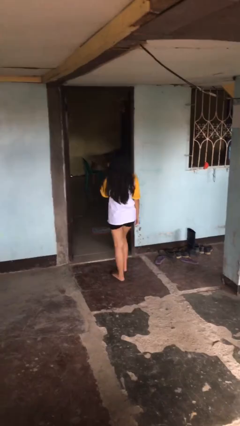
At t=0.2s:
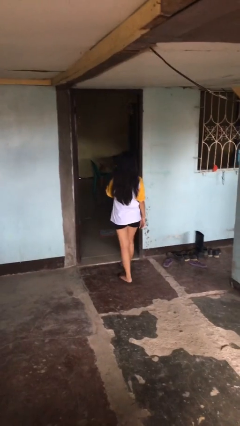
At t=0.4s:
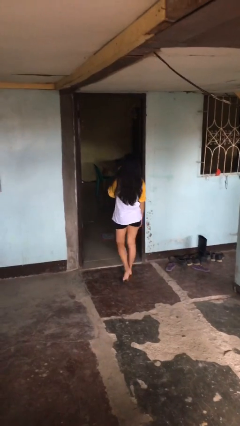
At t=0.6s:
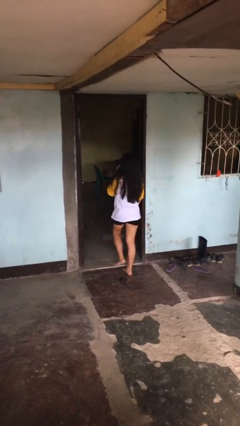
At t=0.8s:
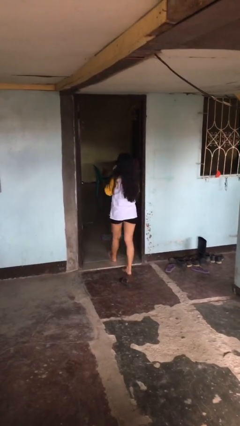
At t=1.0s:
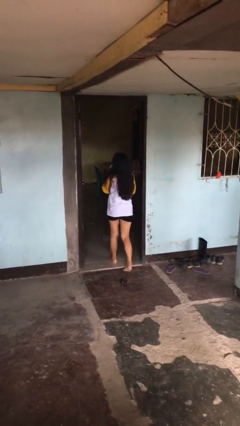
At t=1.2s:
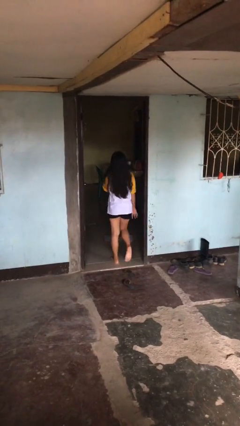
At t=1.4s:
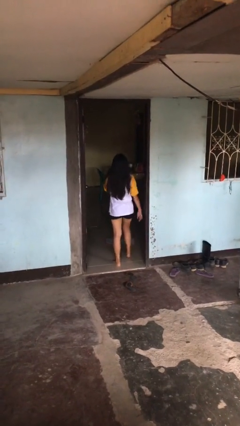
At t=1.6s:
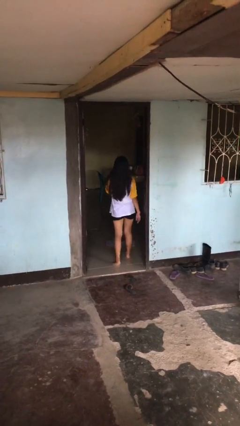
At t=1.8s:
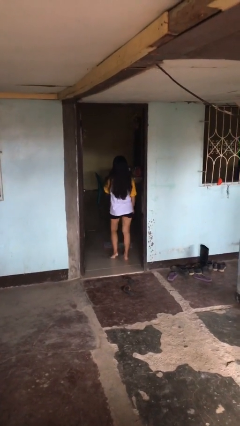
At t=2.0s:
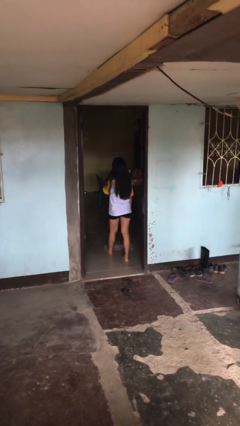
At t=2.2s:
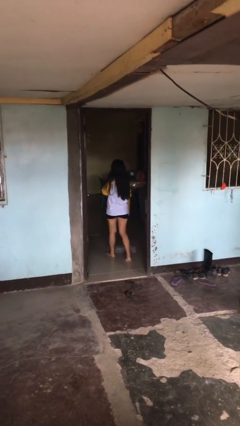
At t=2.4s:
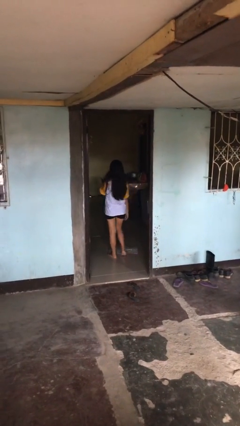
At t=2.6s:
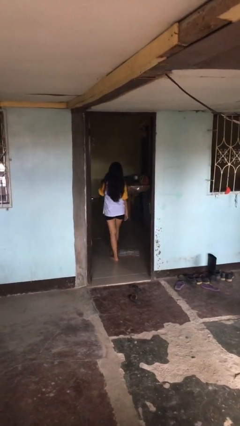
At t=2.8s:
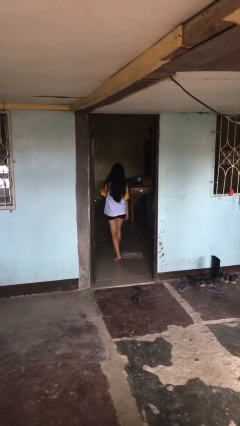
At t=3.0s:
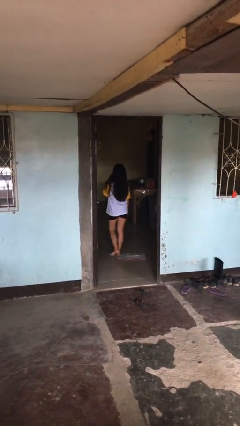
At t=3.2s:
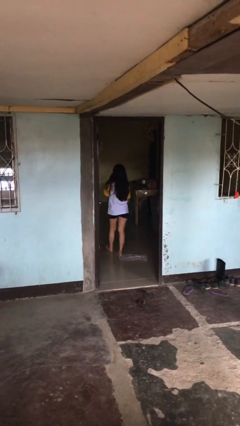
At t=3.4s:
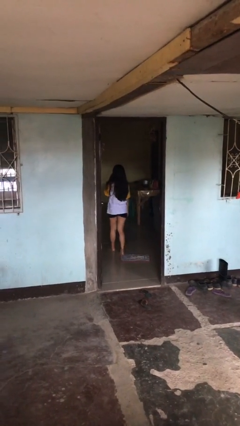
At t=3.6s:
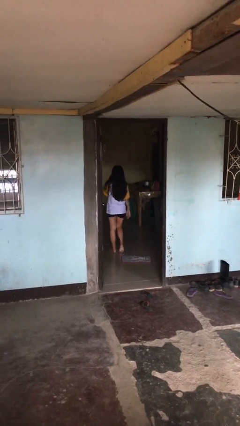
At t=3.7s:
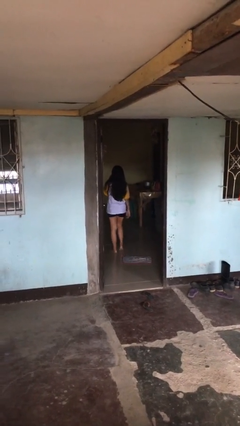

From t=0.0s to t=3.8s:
person exits scene through structure

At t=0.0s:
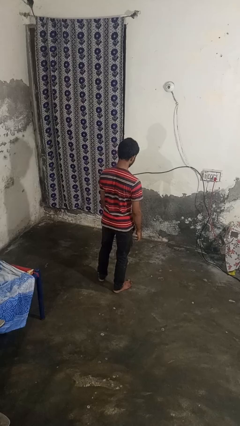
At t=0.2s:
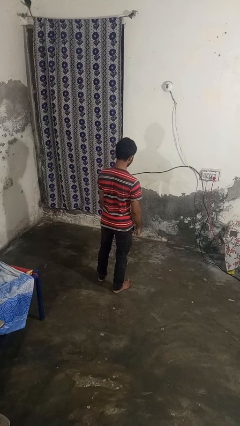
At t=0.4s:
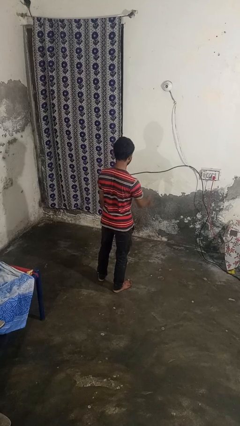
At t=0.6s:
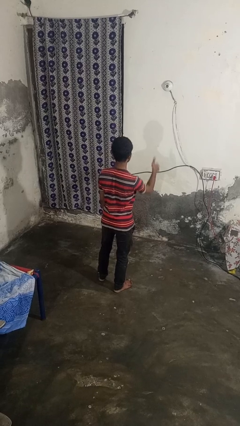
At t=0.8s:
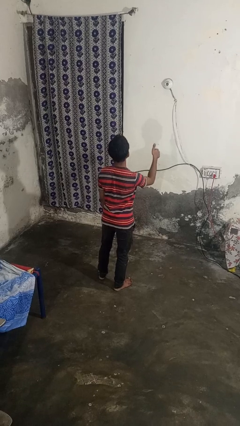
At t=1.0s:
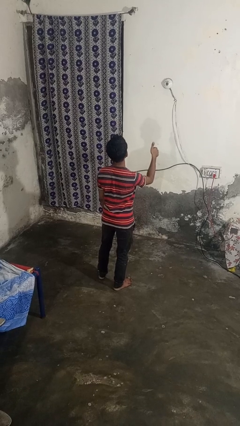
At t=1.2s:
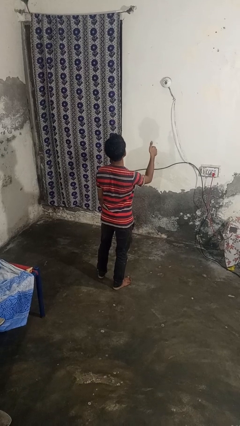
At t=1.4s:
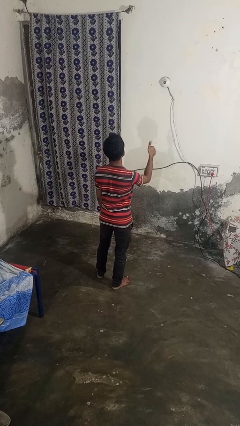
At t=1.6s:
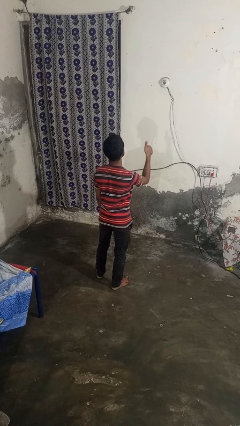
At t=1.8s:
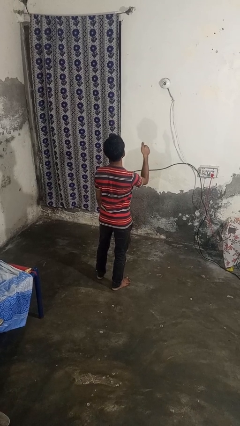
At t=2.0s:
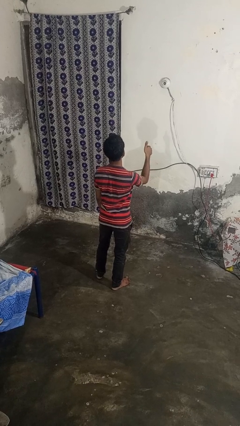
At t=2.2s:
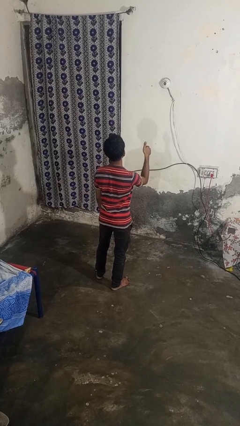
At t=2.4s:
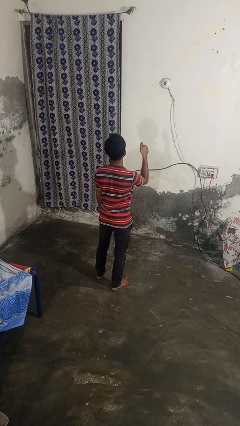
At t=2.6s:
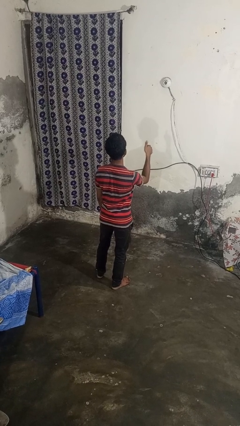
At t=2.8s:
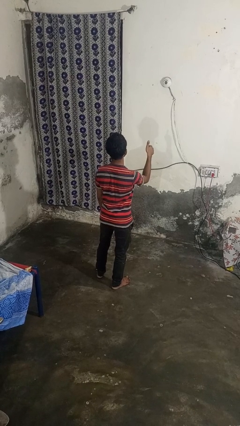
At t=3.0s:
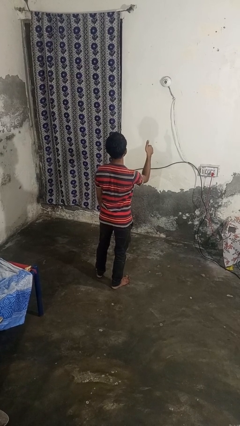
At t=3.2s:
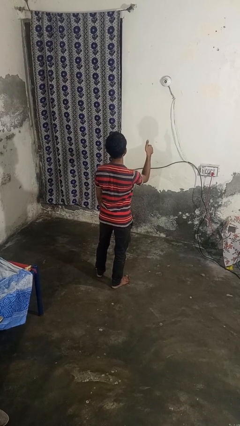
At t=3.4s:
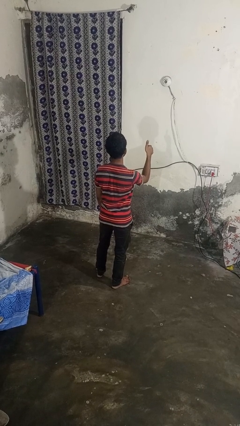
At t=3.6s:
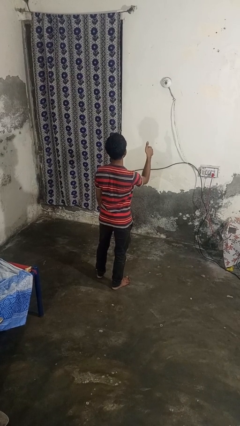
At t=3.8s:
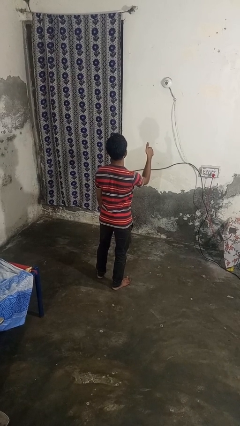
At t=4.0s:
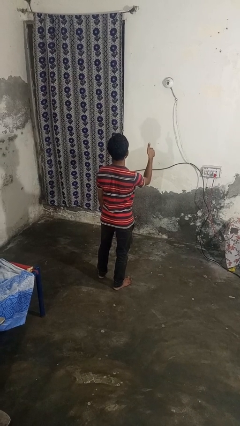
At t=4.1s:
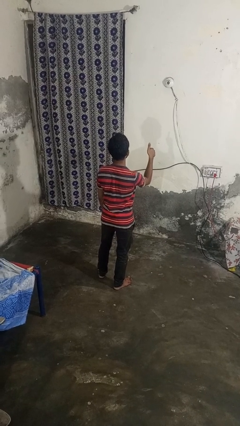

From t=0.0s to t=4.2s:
person gestures thumbs up

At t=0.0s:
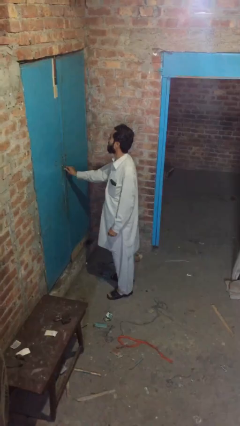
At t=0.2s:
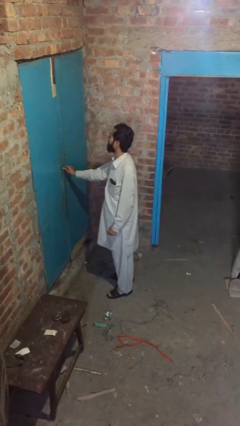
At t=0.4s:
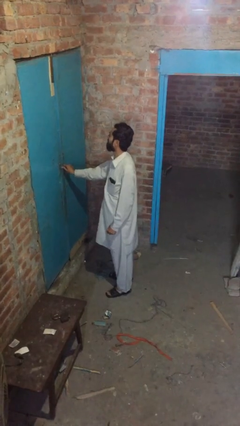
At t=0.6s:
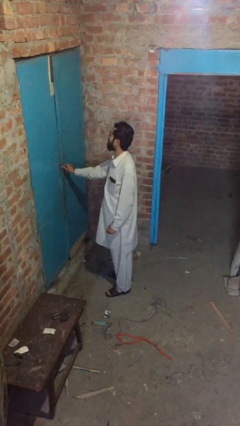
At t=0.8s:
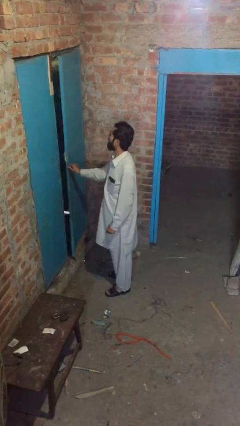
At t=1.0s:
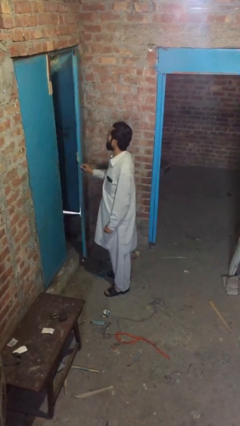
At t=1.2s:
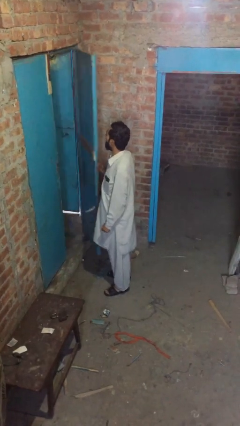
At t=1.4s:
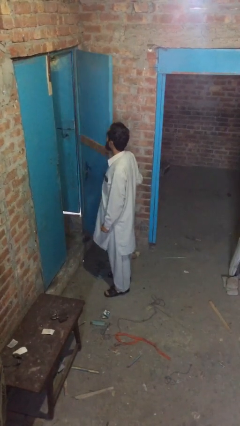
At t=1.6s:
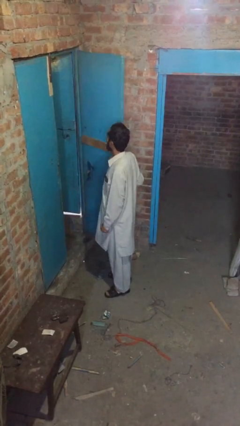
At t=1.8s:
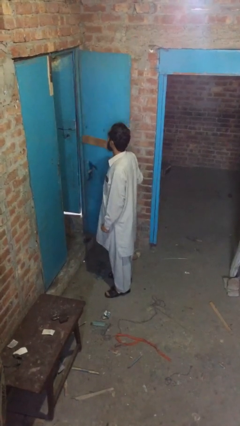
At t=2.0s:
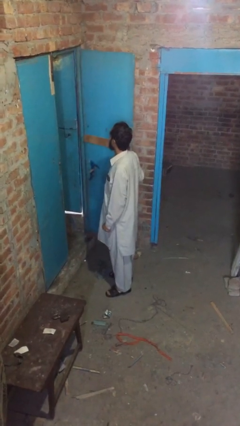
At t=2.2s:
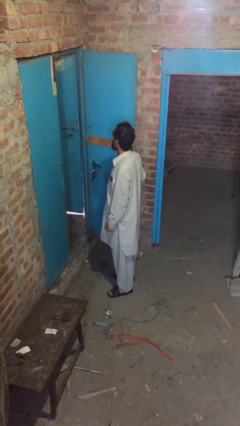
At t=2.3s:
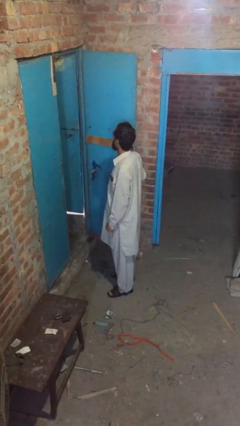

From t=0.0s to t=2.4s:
person opens facility door

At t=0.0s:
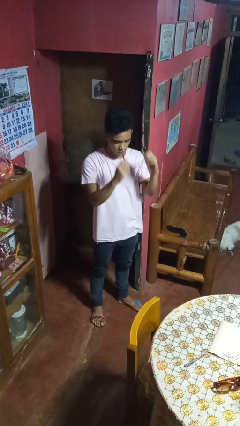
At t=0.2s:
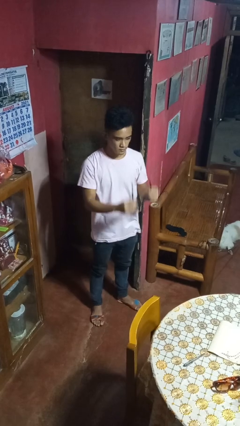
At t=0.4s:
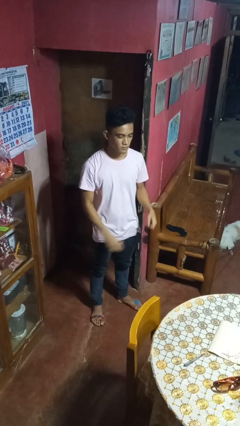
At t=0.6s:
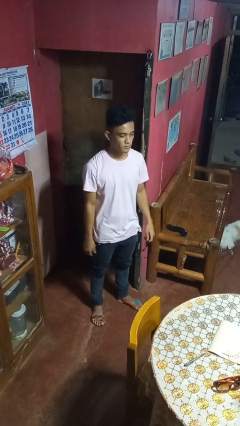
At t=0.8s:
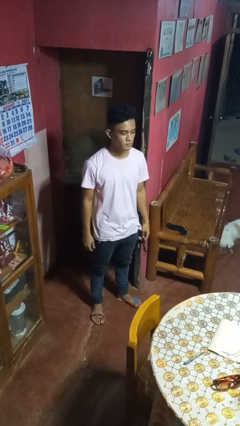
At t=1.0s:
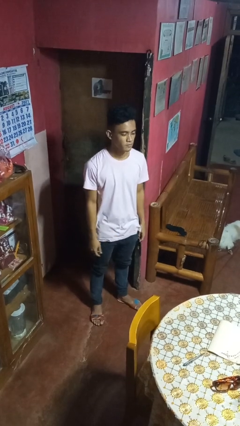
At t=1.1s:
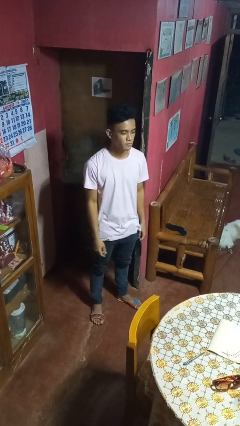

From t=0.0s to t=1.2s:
person takes off sunglasses

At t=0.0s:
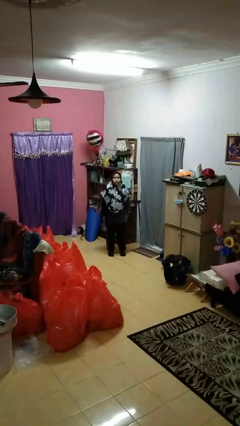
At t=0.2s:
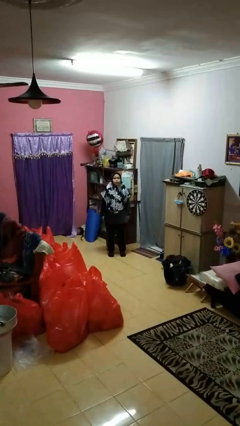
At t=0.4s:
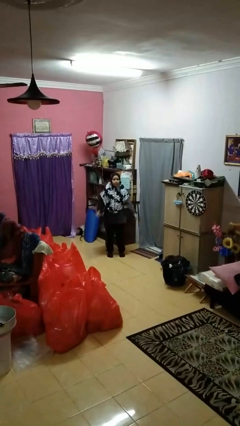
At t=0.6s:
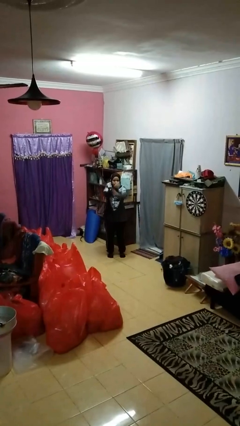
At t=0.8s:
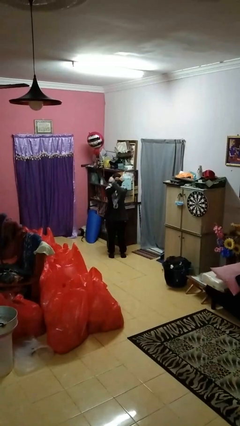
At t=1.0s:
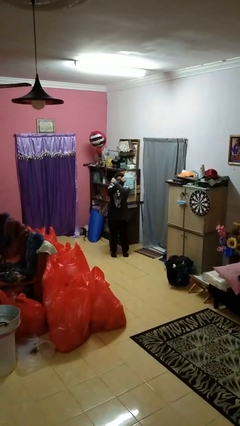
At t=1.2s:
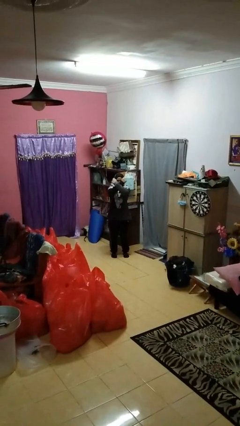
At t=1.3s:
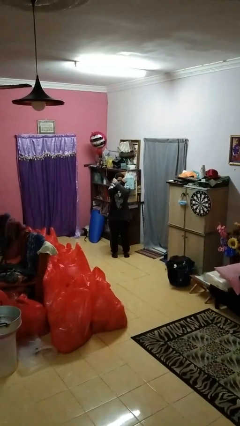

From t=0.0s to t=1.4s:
person crosses arms

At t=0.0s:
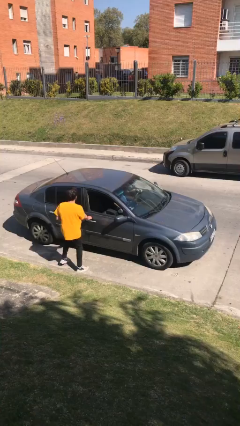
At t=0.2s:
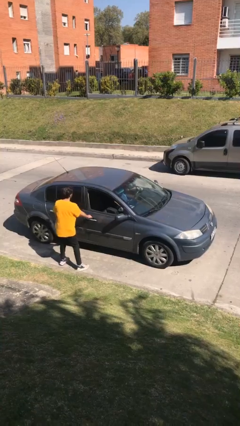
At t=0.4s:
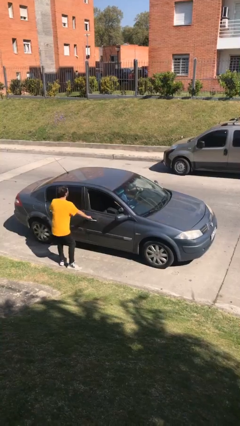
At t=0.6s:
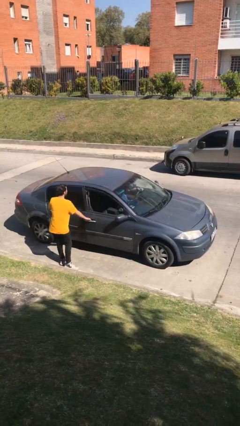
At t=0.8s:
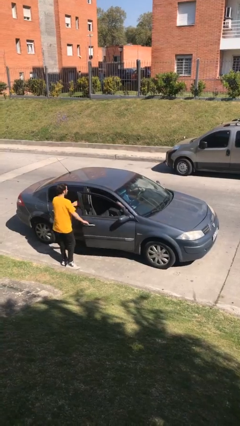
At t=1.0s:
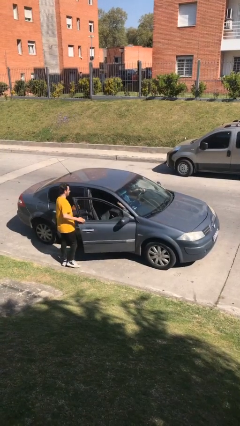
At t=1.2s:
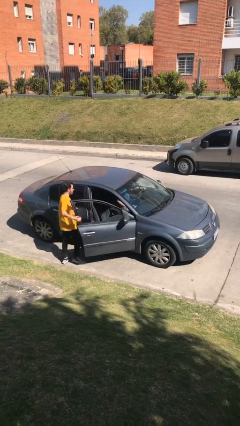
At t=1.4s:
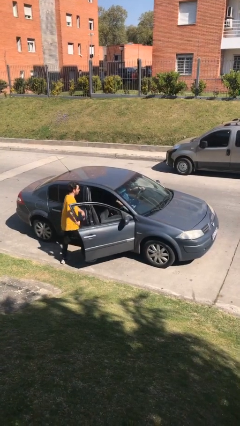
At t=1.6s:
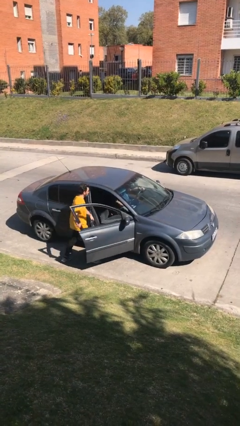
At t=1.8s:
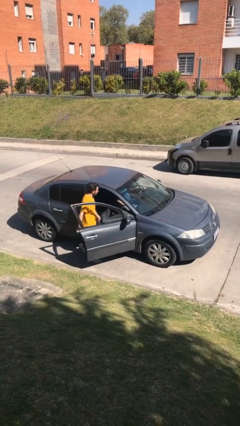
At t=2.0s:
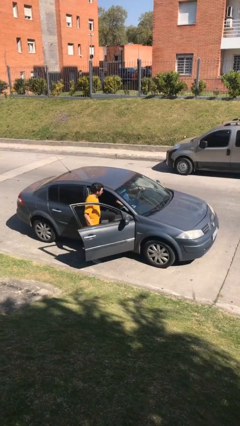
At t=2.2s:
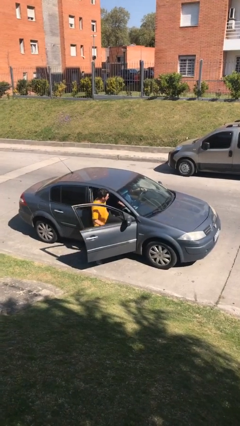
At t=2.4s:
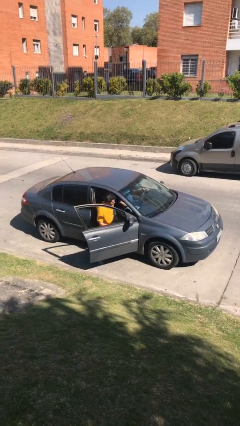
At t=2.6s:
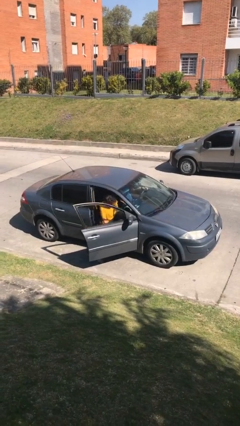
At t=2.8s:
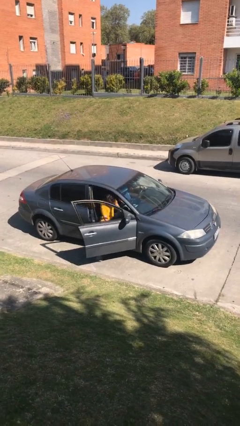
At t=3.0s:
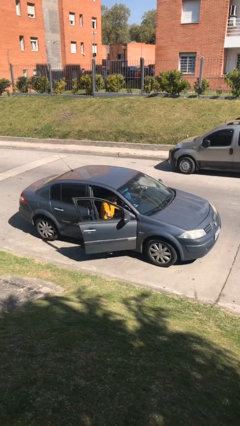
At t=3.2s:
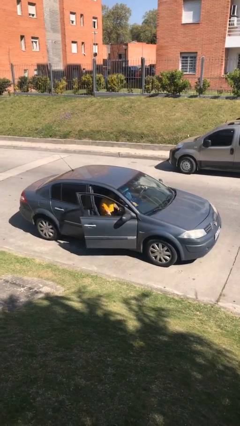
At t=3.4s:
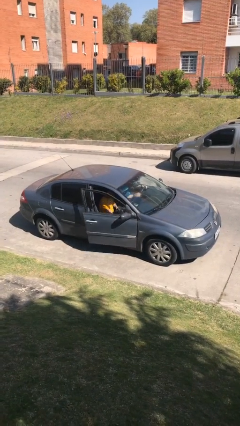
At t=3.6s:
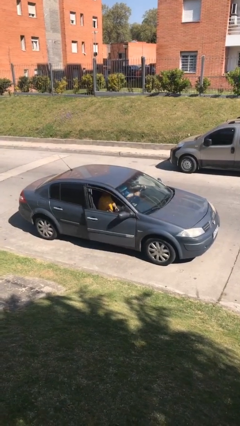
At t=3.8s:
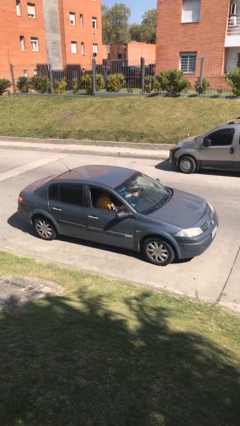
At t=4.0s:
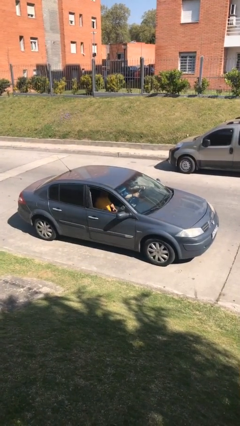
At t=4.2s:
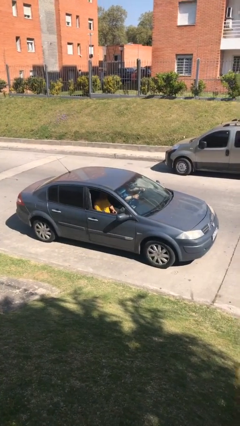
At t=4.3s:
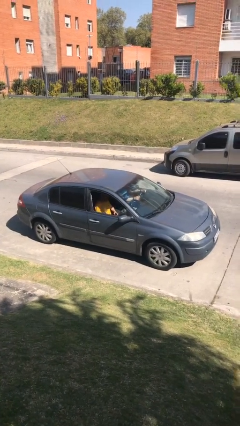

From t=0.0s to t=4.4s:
car picks up person
